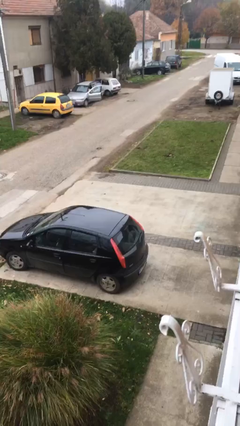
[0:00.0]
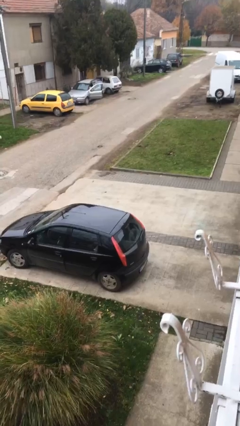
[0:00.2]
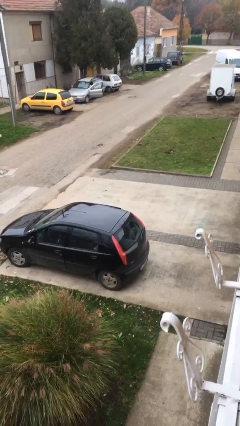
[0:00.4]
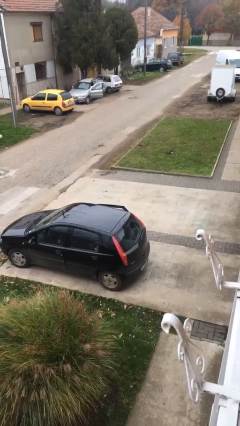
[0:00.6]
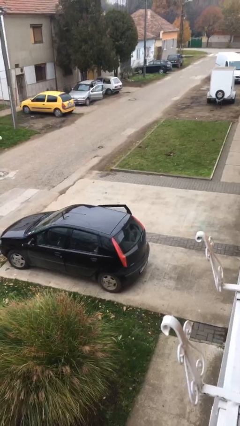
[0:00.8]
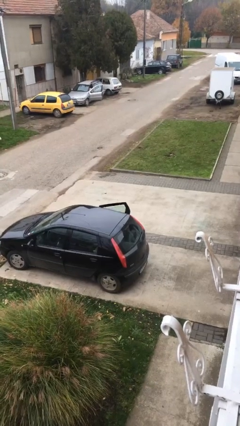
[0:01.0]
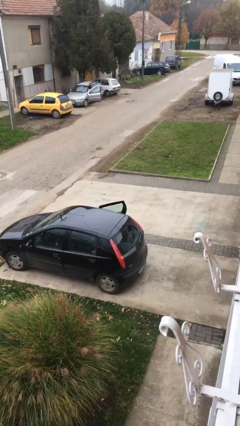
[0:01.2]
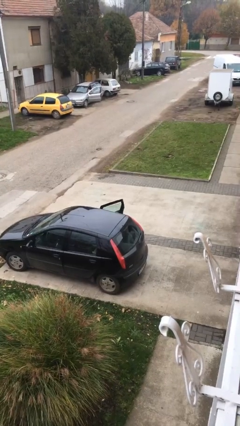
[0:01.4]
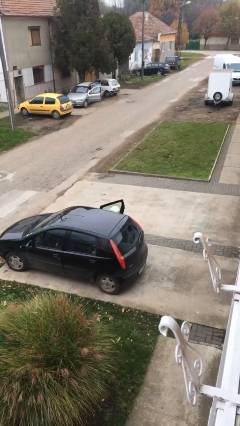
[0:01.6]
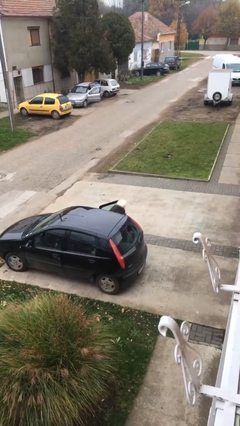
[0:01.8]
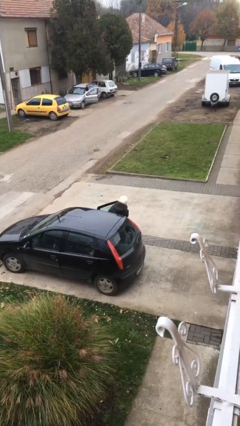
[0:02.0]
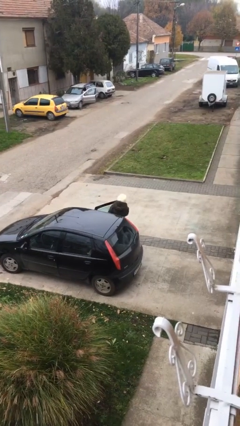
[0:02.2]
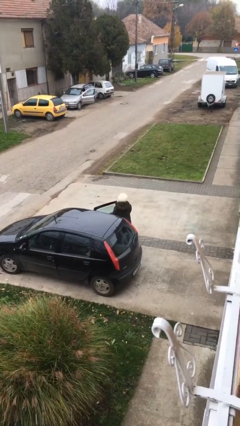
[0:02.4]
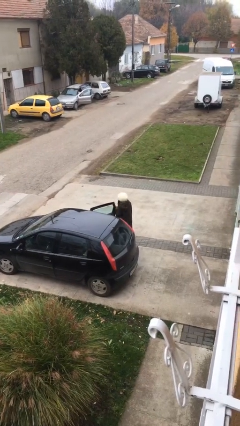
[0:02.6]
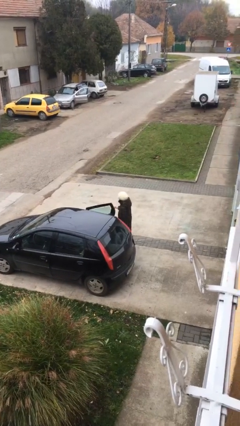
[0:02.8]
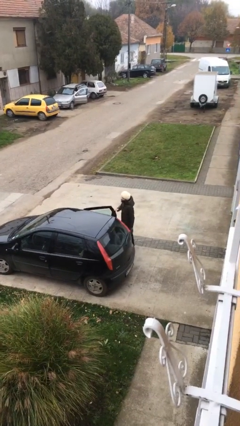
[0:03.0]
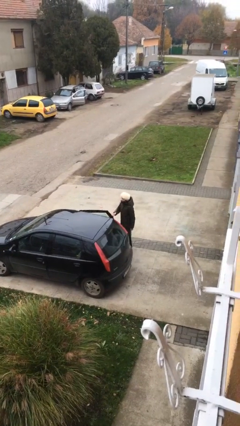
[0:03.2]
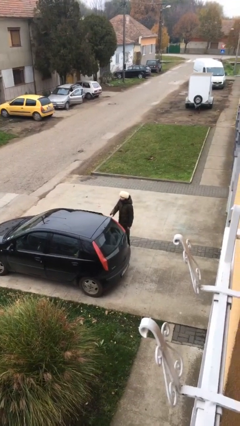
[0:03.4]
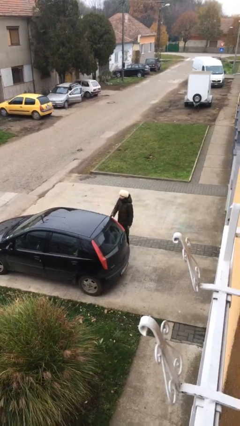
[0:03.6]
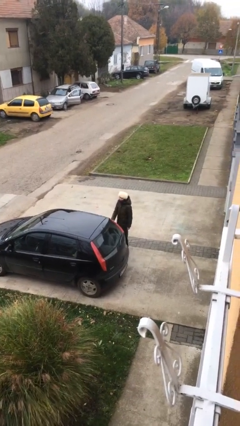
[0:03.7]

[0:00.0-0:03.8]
person exits car

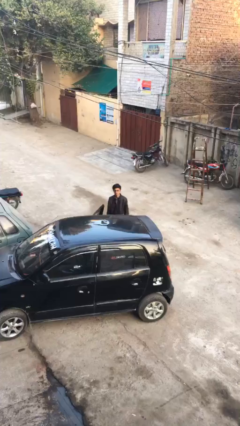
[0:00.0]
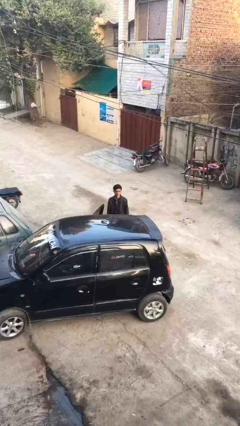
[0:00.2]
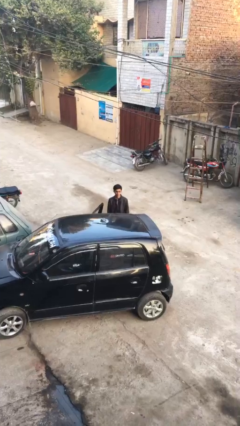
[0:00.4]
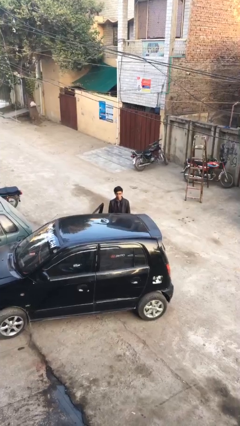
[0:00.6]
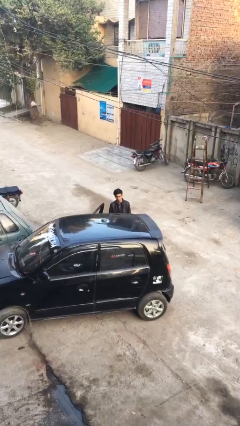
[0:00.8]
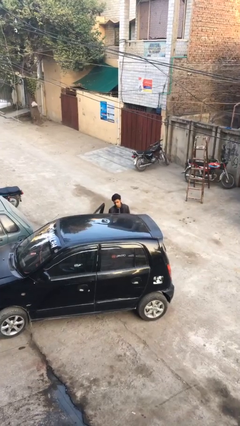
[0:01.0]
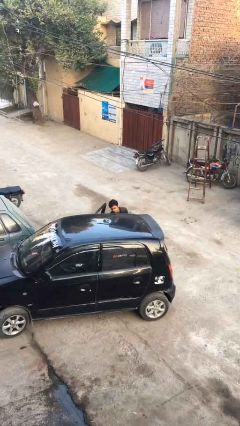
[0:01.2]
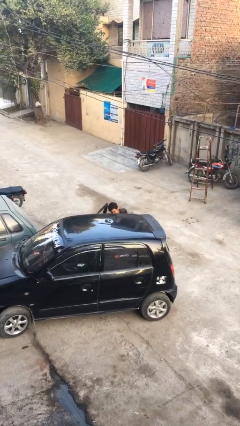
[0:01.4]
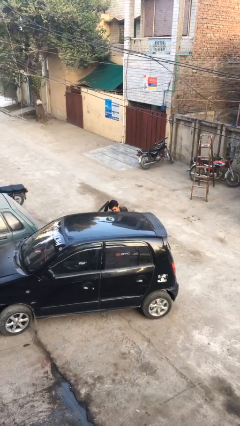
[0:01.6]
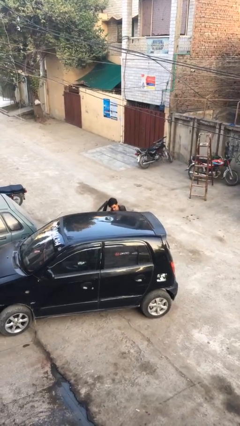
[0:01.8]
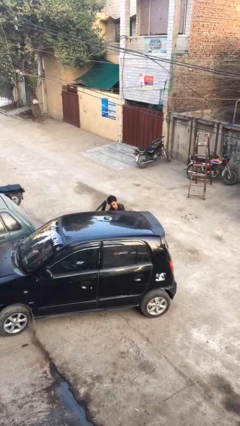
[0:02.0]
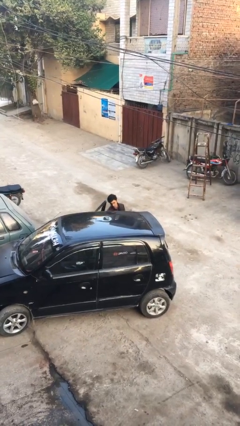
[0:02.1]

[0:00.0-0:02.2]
person unloads car

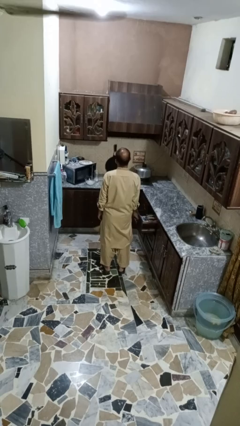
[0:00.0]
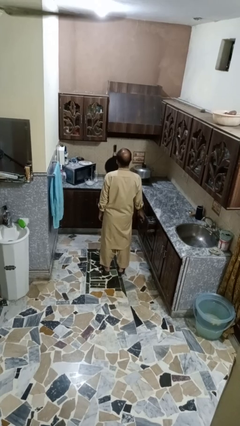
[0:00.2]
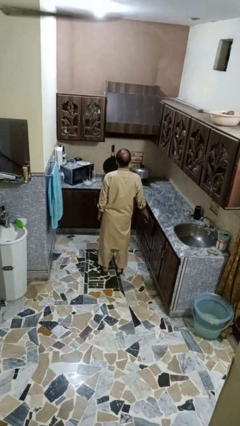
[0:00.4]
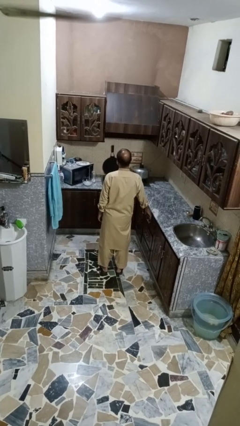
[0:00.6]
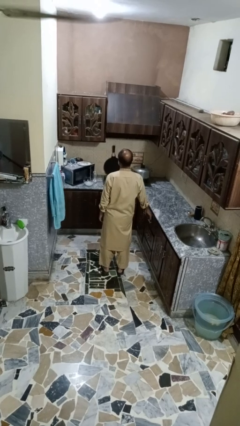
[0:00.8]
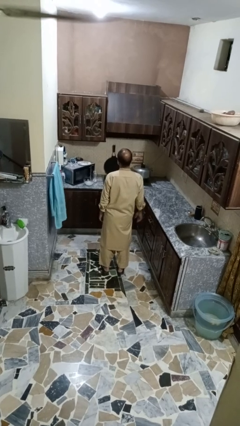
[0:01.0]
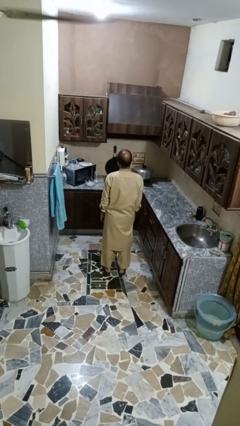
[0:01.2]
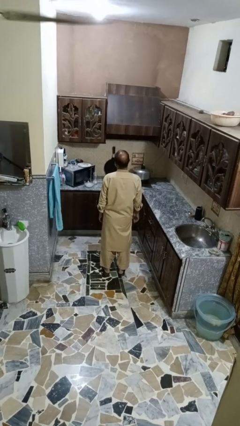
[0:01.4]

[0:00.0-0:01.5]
person closes kitchen drawer

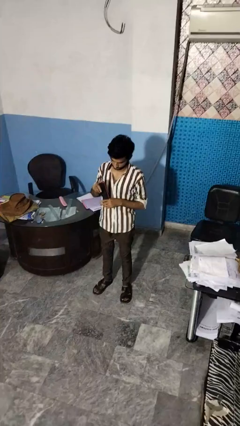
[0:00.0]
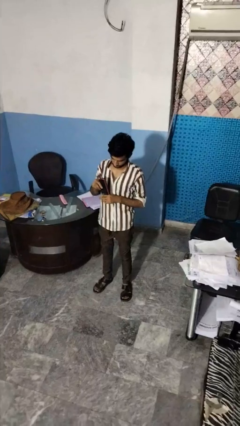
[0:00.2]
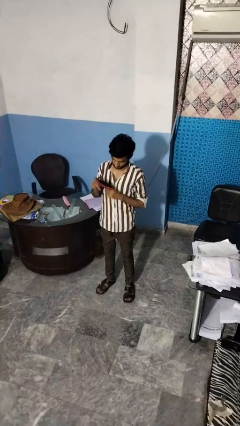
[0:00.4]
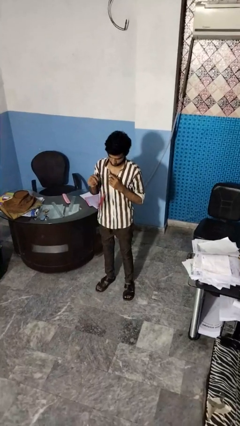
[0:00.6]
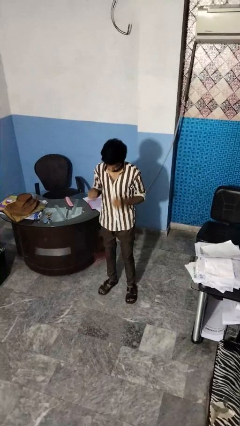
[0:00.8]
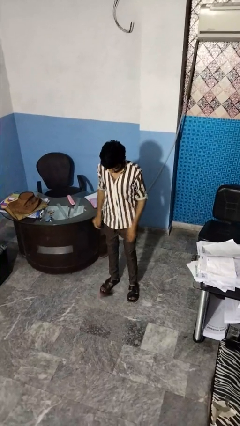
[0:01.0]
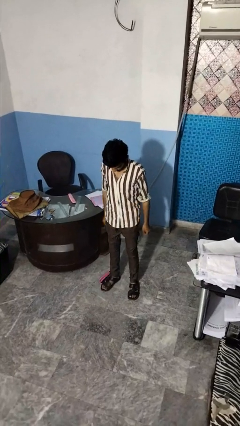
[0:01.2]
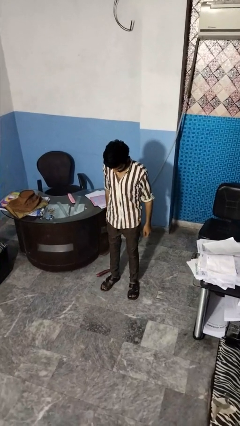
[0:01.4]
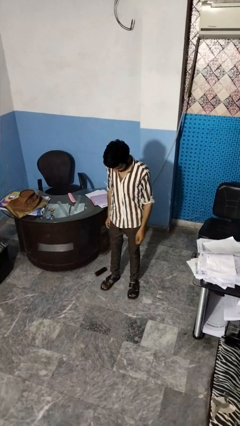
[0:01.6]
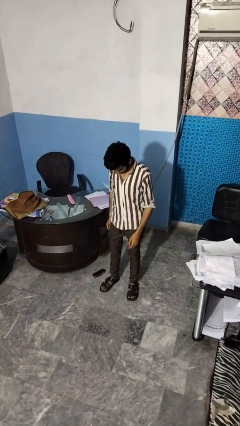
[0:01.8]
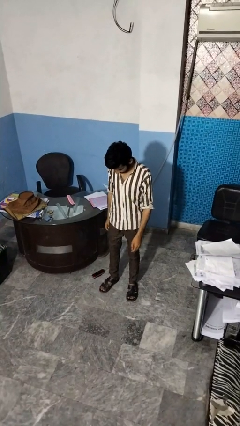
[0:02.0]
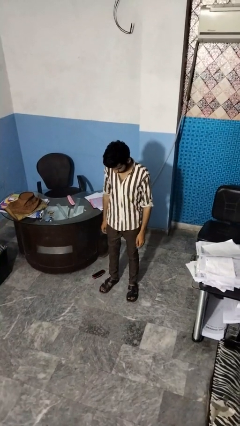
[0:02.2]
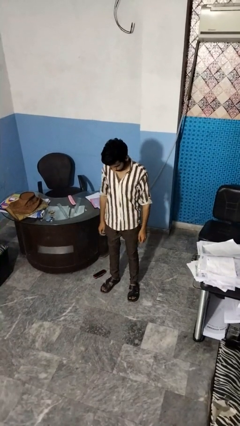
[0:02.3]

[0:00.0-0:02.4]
person drops object

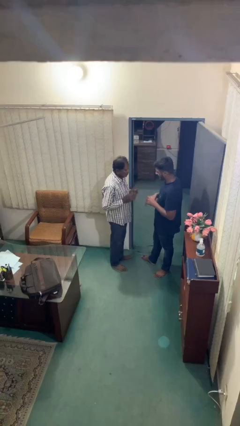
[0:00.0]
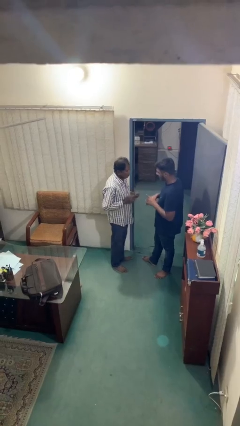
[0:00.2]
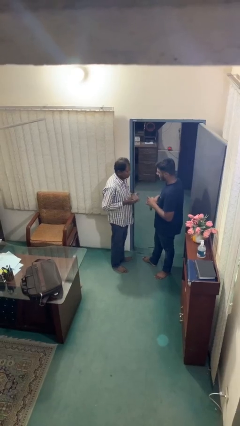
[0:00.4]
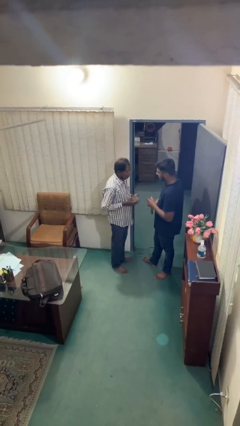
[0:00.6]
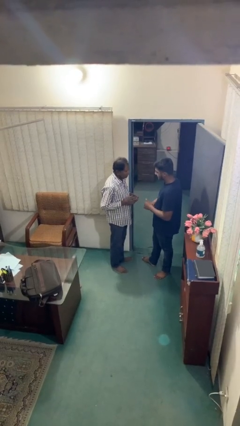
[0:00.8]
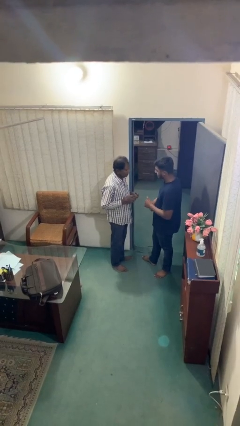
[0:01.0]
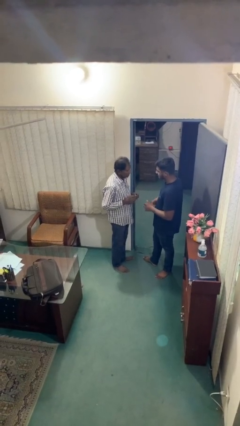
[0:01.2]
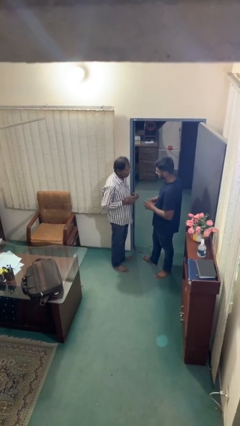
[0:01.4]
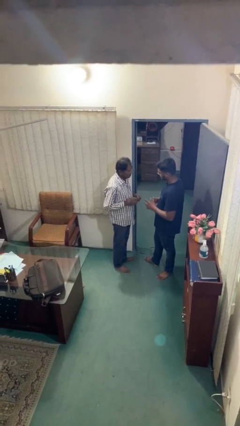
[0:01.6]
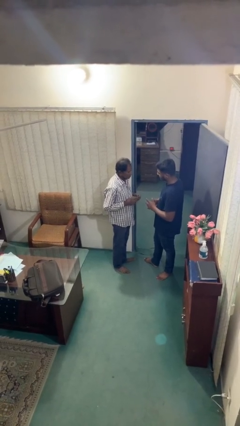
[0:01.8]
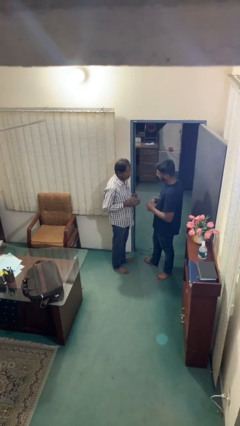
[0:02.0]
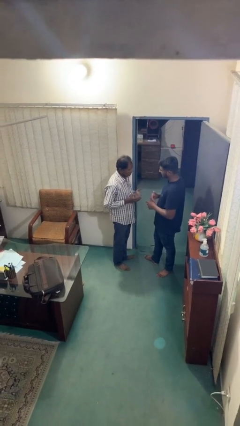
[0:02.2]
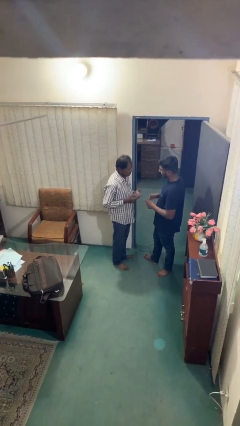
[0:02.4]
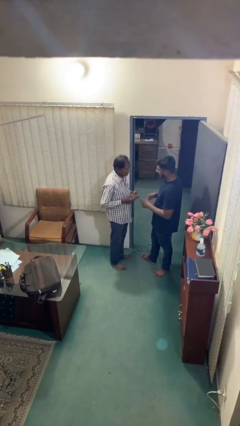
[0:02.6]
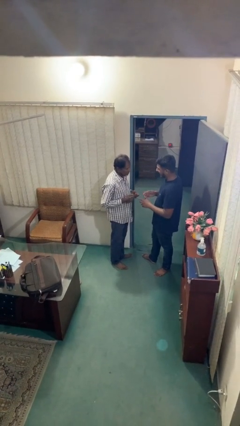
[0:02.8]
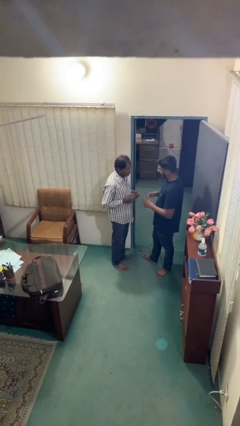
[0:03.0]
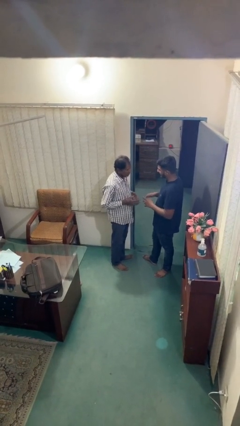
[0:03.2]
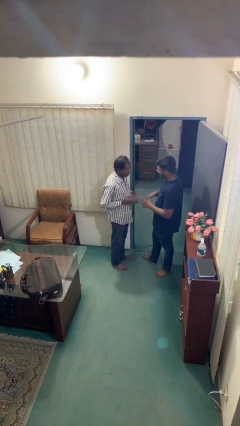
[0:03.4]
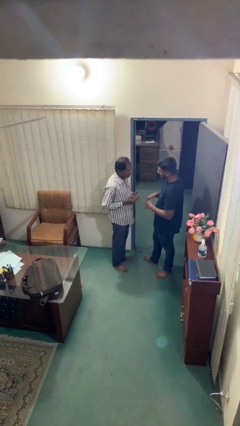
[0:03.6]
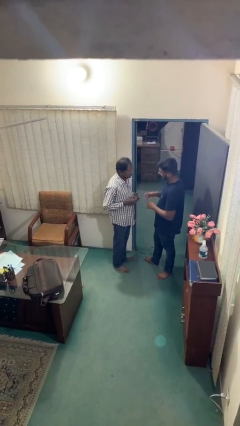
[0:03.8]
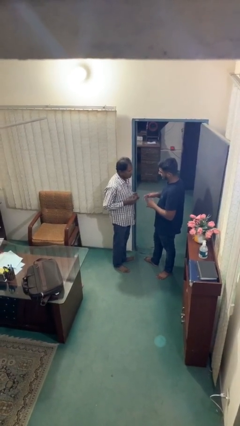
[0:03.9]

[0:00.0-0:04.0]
person talks to person

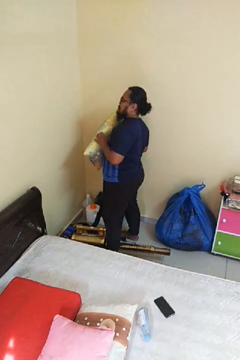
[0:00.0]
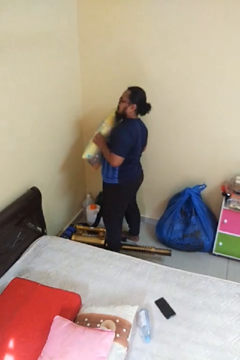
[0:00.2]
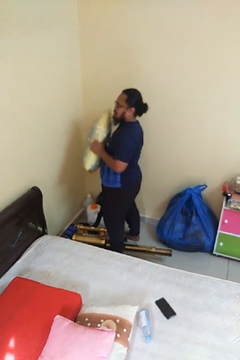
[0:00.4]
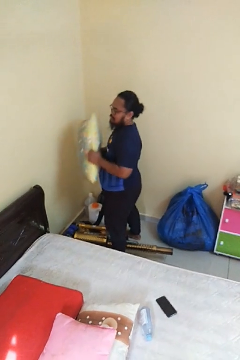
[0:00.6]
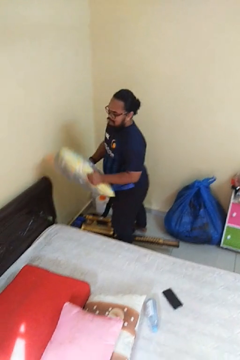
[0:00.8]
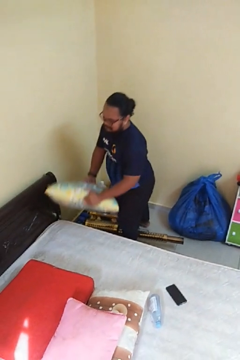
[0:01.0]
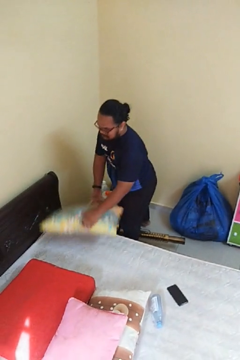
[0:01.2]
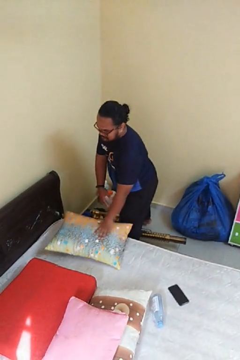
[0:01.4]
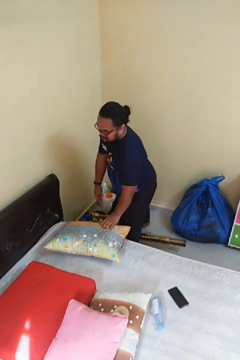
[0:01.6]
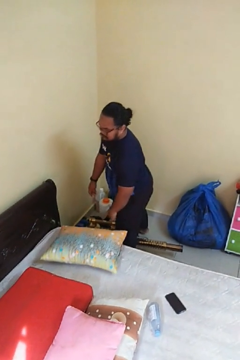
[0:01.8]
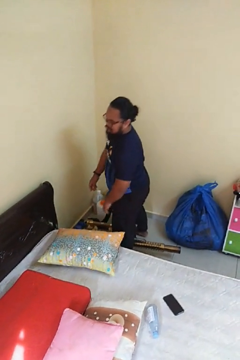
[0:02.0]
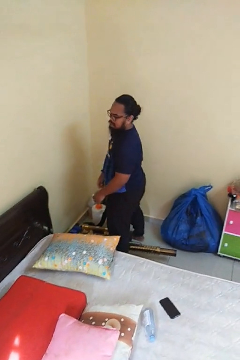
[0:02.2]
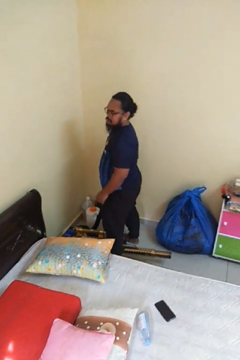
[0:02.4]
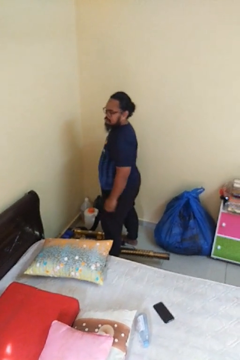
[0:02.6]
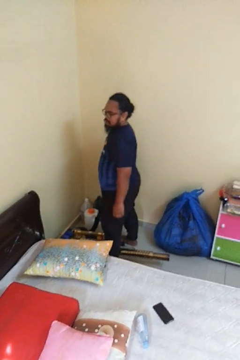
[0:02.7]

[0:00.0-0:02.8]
person puts down object on bed

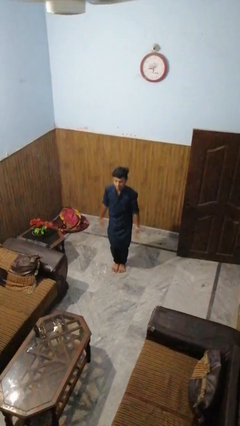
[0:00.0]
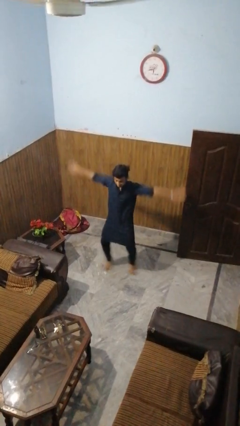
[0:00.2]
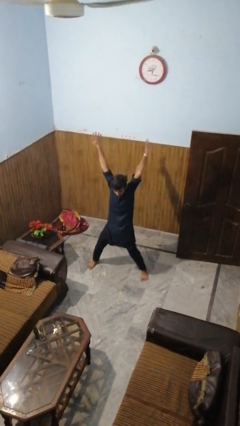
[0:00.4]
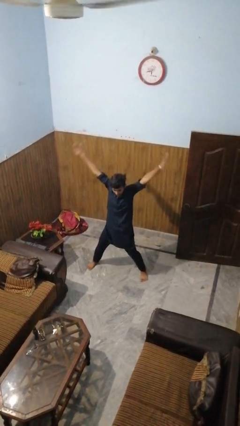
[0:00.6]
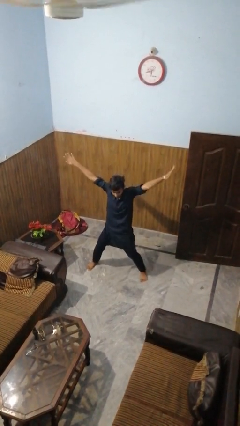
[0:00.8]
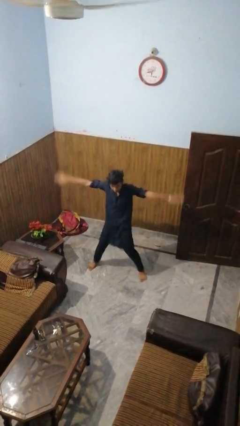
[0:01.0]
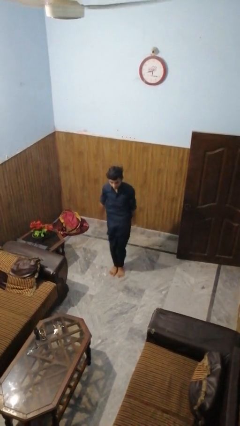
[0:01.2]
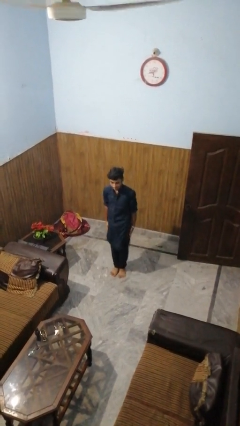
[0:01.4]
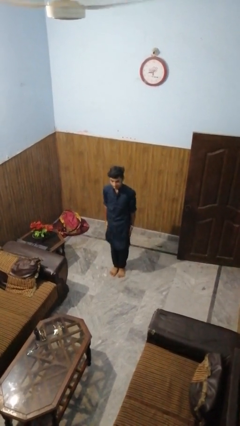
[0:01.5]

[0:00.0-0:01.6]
person exercises with jumping jacks
